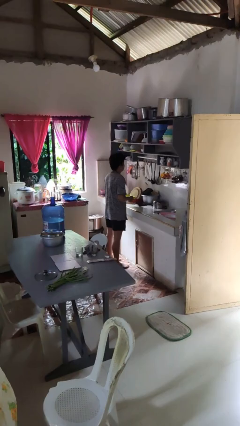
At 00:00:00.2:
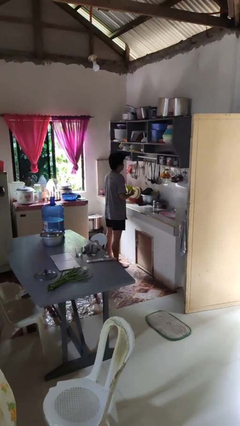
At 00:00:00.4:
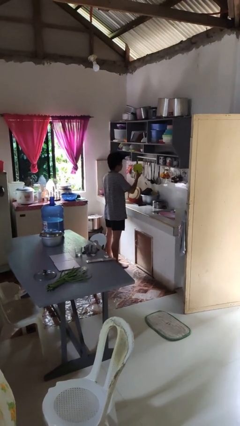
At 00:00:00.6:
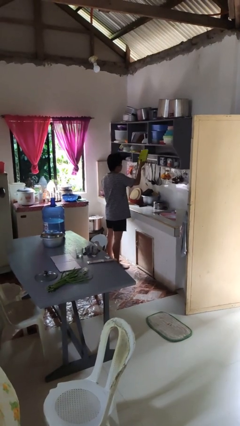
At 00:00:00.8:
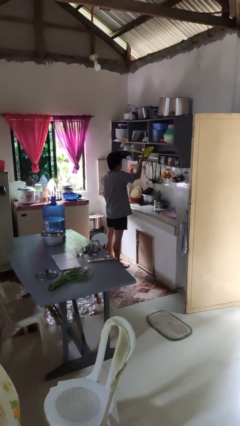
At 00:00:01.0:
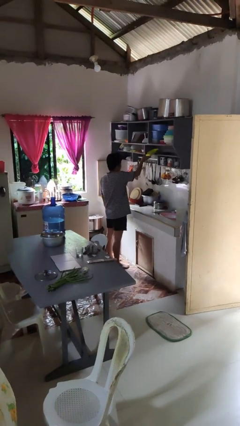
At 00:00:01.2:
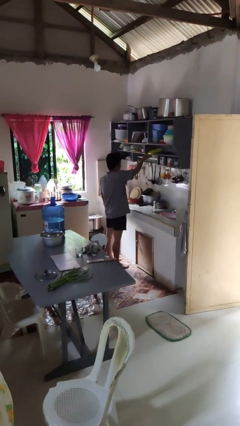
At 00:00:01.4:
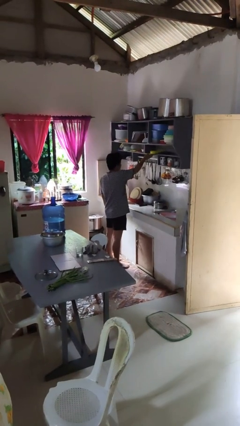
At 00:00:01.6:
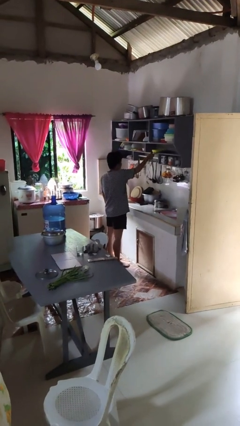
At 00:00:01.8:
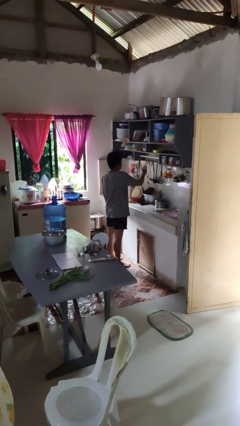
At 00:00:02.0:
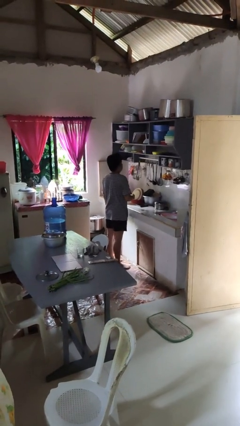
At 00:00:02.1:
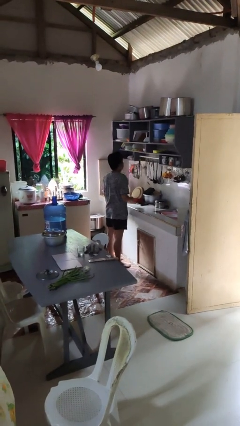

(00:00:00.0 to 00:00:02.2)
person puts object in cabinet

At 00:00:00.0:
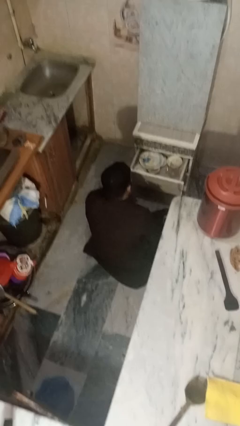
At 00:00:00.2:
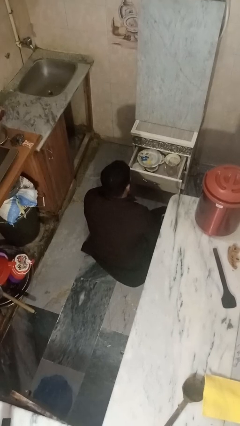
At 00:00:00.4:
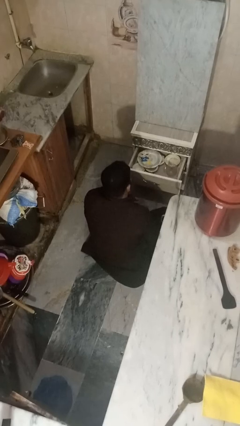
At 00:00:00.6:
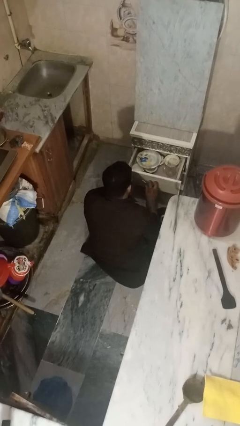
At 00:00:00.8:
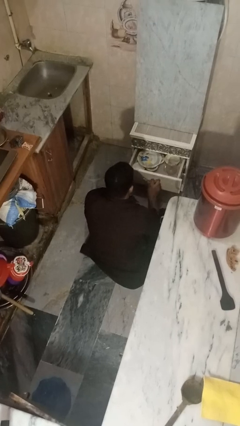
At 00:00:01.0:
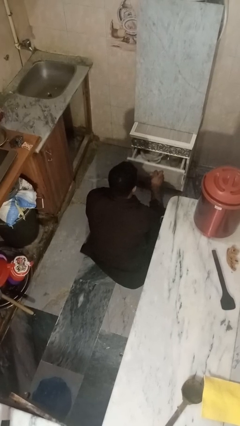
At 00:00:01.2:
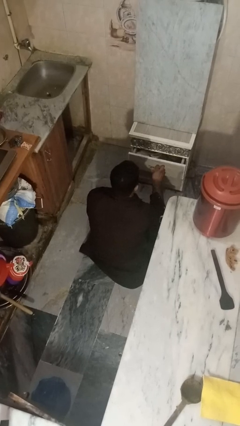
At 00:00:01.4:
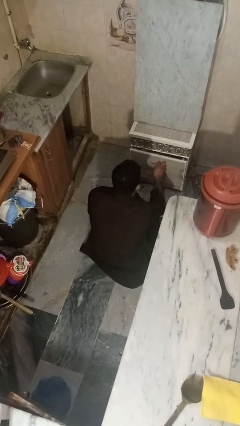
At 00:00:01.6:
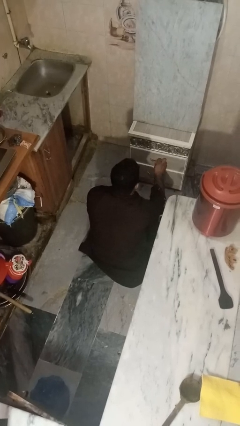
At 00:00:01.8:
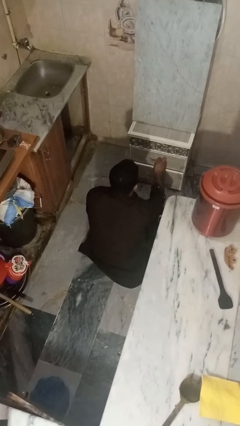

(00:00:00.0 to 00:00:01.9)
person closes kitchen drawer

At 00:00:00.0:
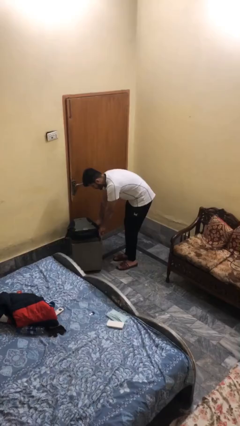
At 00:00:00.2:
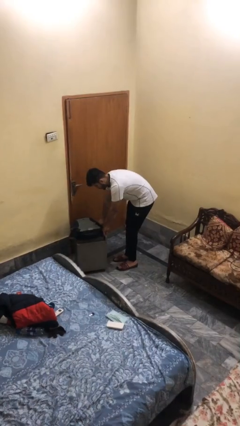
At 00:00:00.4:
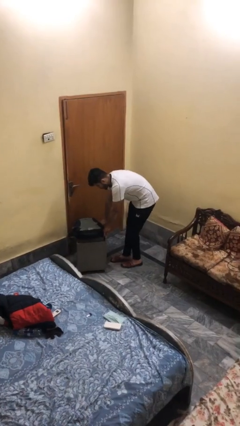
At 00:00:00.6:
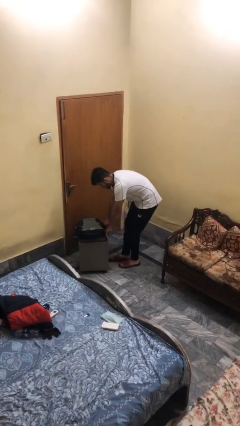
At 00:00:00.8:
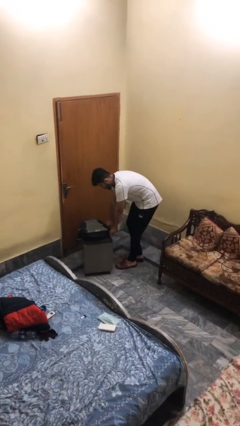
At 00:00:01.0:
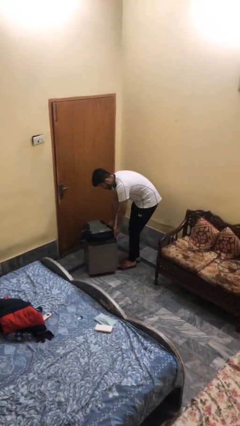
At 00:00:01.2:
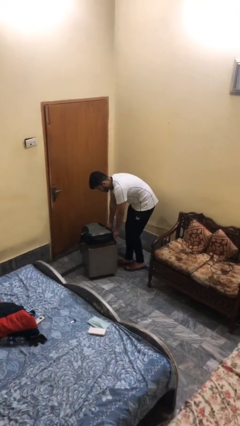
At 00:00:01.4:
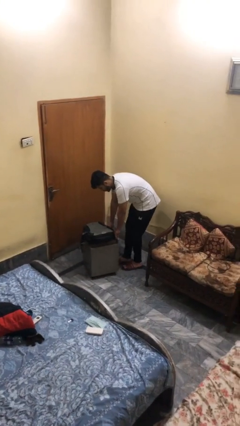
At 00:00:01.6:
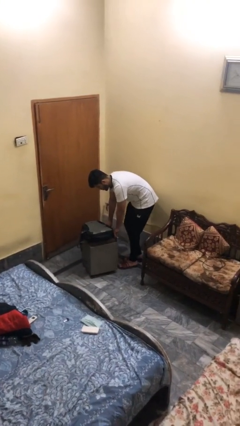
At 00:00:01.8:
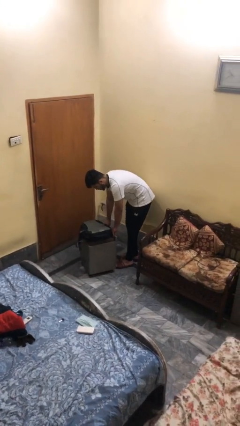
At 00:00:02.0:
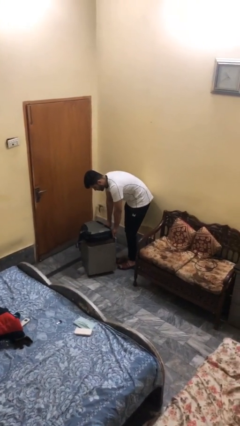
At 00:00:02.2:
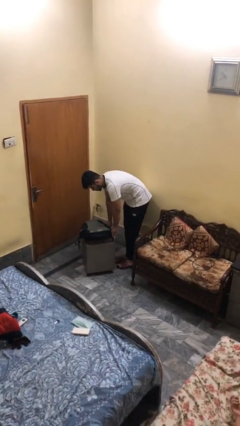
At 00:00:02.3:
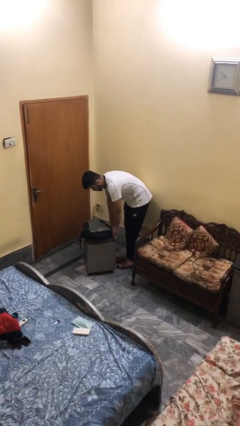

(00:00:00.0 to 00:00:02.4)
person pulls wheeled cart

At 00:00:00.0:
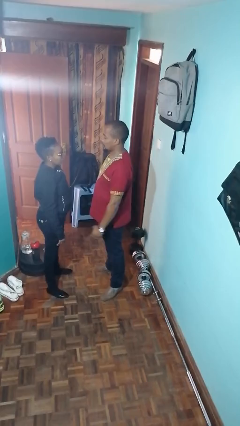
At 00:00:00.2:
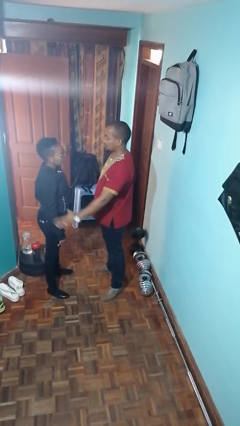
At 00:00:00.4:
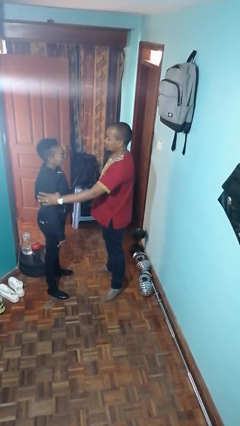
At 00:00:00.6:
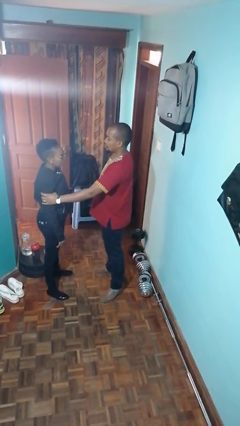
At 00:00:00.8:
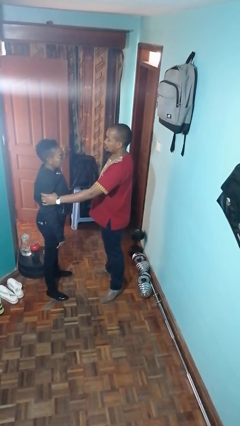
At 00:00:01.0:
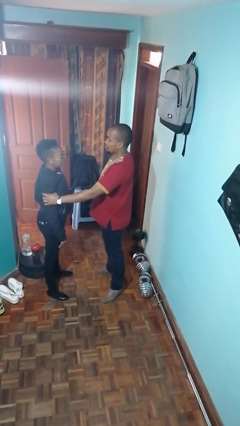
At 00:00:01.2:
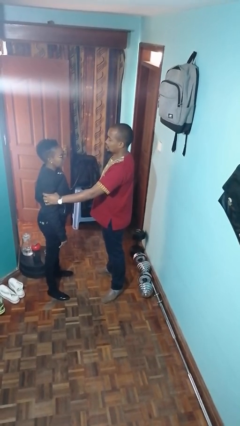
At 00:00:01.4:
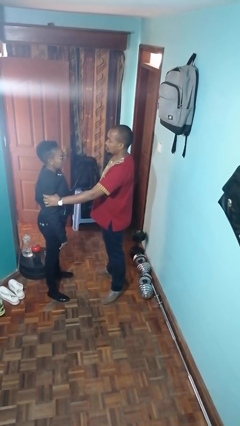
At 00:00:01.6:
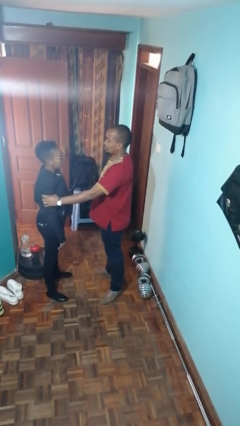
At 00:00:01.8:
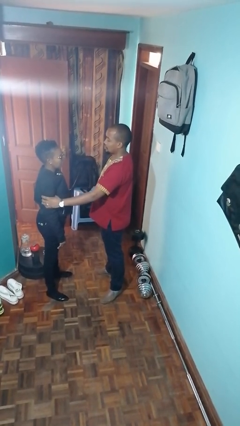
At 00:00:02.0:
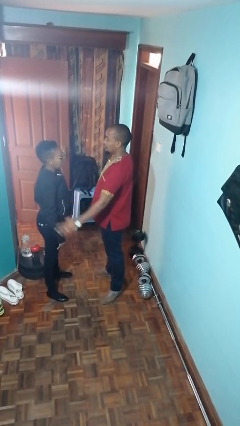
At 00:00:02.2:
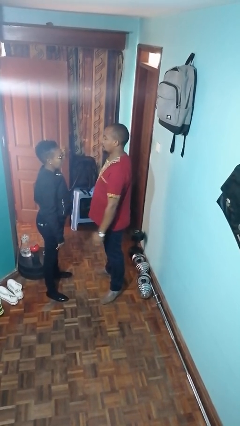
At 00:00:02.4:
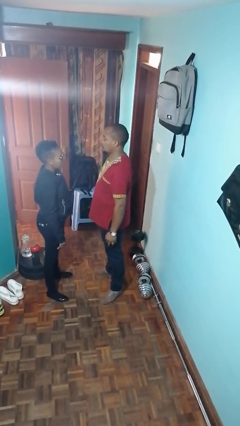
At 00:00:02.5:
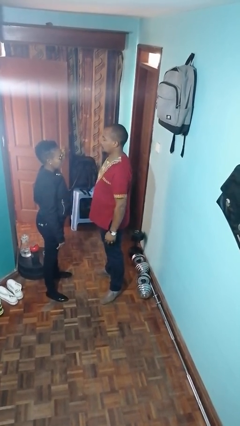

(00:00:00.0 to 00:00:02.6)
person grabs person by bicep

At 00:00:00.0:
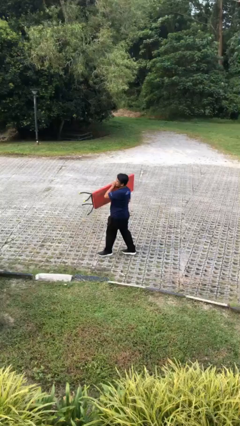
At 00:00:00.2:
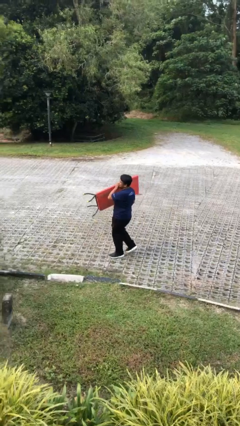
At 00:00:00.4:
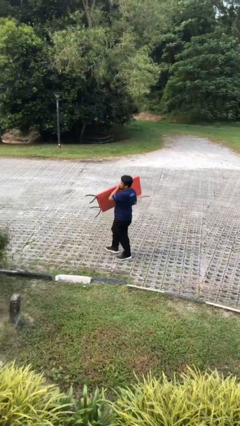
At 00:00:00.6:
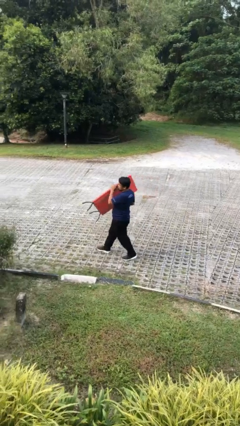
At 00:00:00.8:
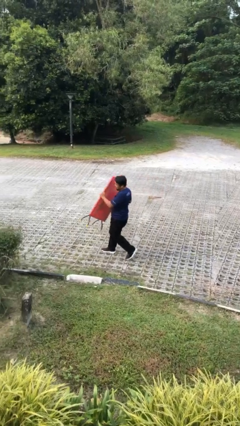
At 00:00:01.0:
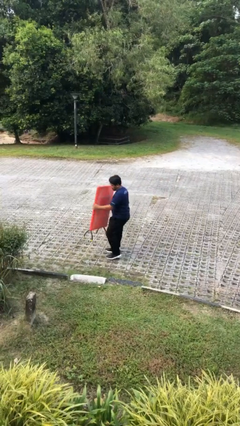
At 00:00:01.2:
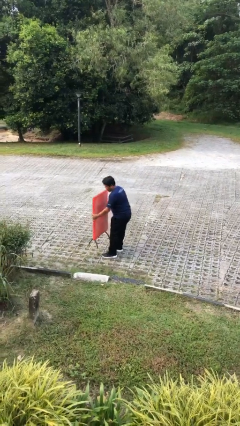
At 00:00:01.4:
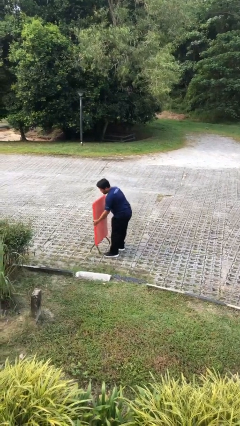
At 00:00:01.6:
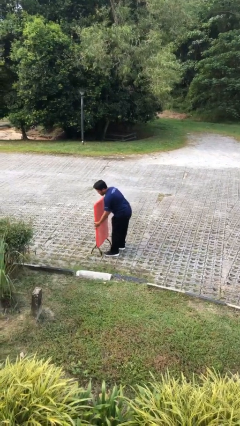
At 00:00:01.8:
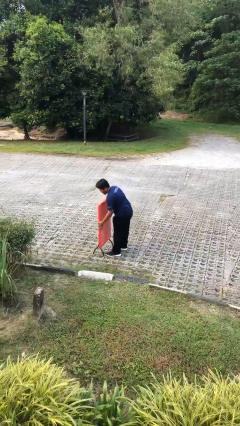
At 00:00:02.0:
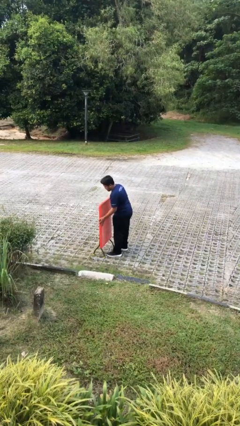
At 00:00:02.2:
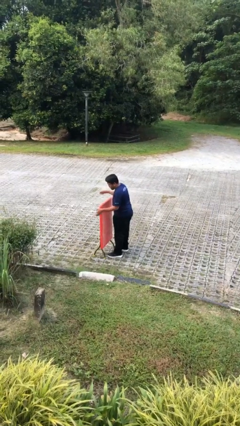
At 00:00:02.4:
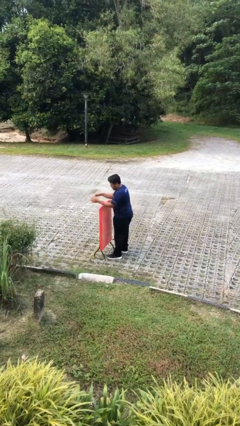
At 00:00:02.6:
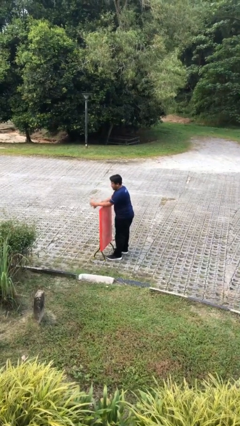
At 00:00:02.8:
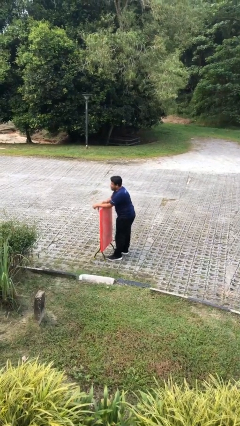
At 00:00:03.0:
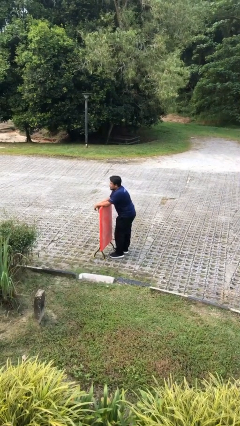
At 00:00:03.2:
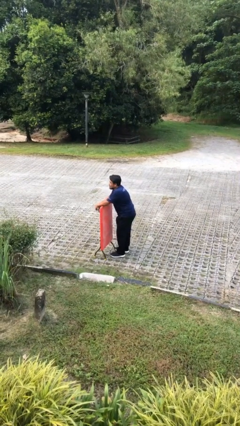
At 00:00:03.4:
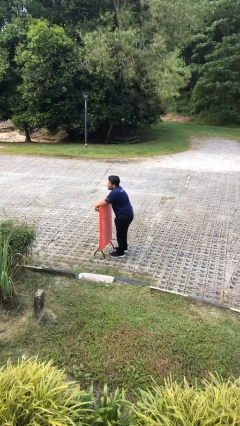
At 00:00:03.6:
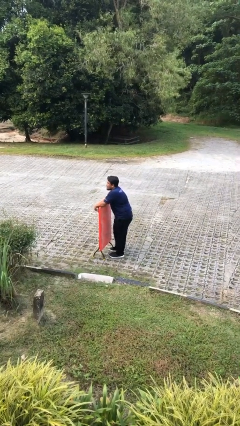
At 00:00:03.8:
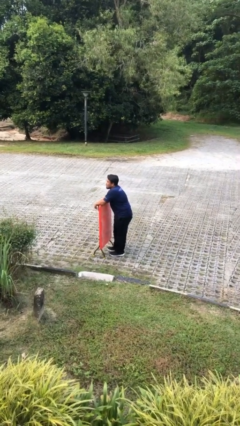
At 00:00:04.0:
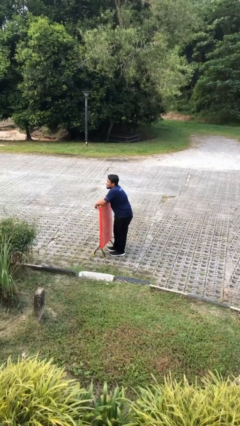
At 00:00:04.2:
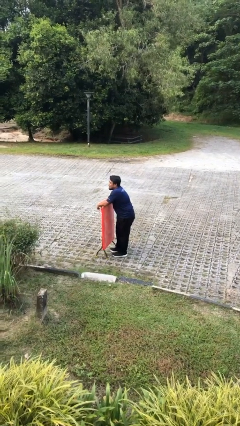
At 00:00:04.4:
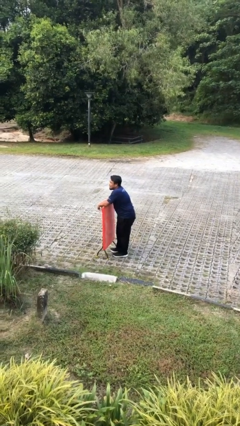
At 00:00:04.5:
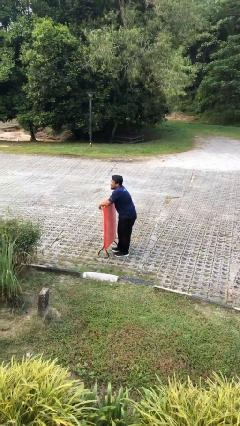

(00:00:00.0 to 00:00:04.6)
person puts down object on floor

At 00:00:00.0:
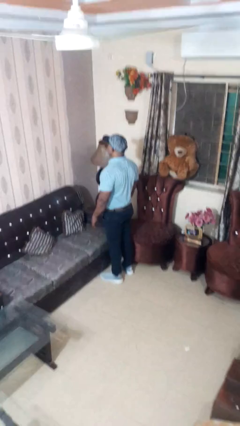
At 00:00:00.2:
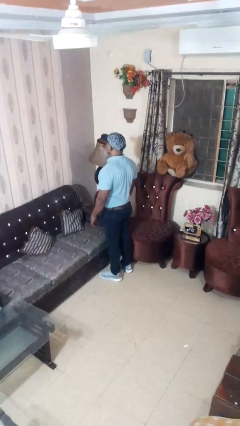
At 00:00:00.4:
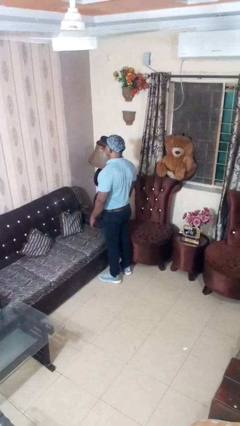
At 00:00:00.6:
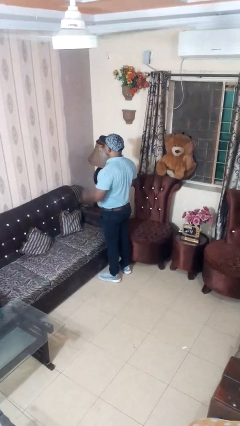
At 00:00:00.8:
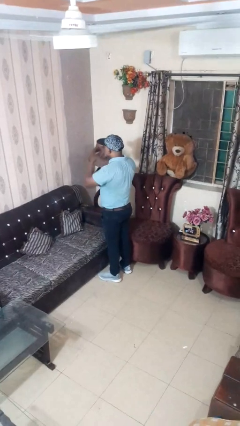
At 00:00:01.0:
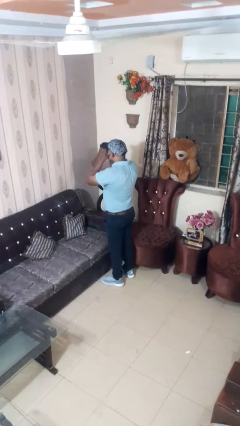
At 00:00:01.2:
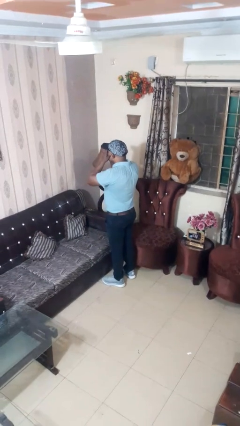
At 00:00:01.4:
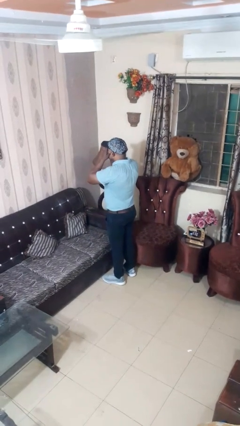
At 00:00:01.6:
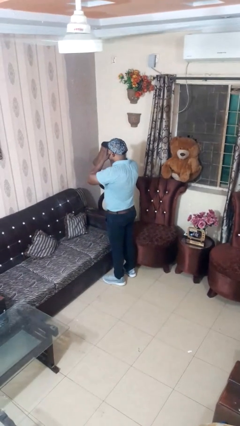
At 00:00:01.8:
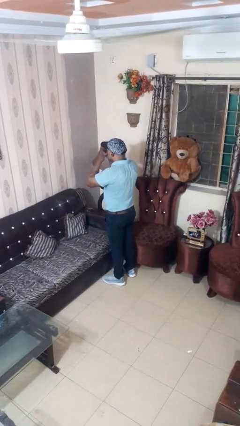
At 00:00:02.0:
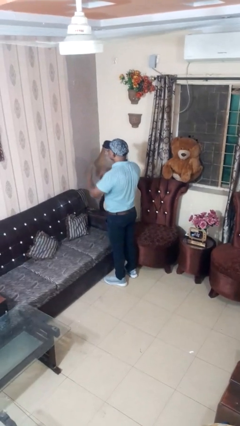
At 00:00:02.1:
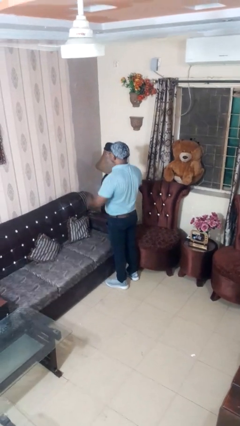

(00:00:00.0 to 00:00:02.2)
person covers face with hands

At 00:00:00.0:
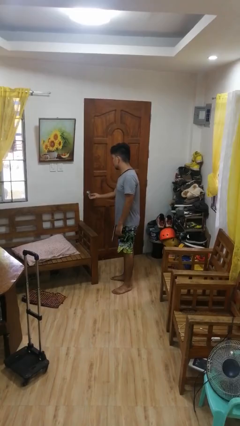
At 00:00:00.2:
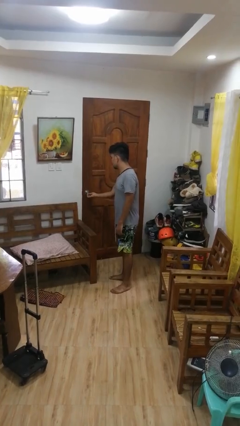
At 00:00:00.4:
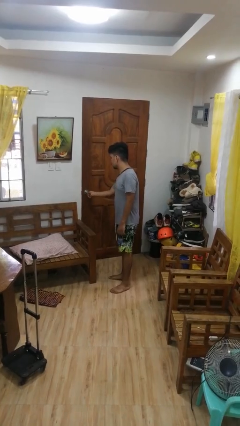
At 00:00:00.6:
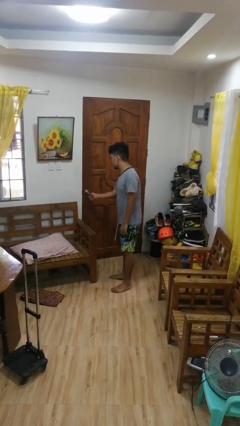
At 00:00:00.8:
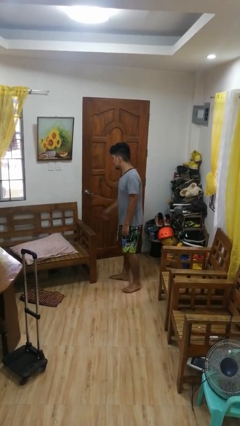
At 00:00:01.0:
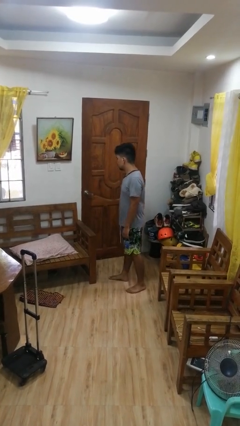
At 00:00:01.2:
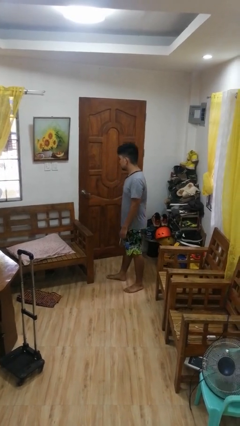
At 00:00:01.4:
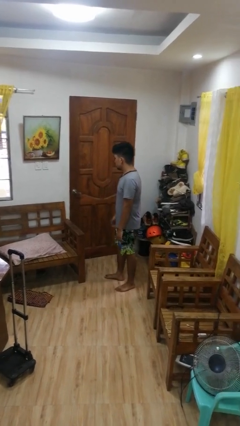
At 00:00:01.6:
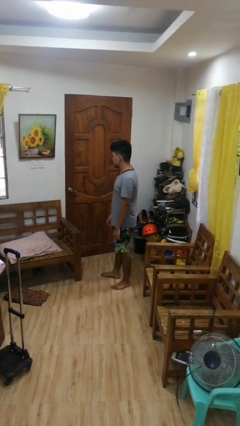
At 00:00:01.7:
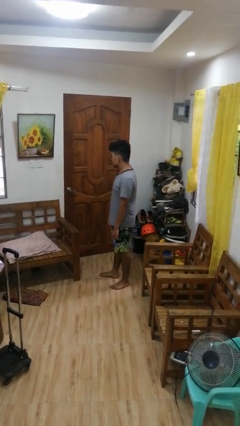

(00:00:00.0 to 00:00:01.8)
person locks door with keys
